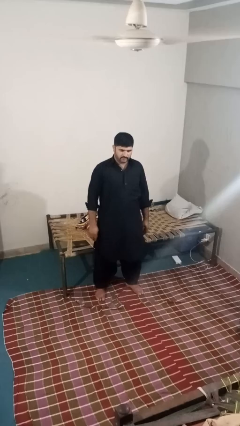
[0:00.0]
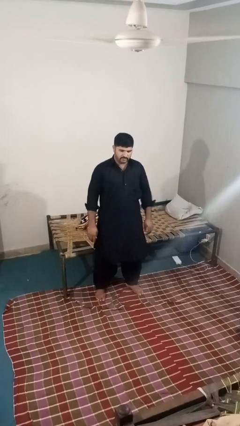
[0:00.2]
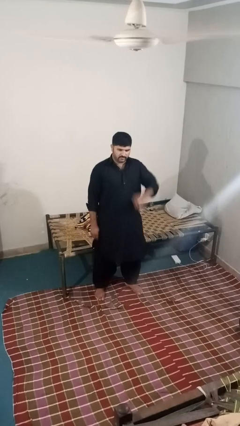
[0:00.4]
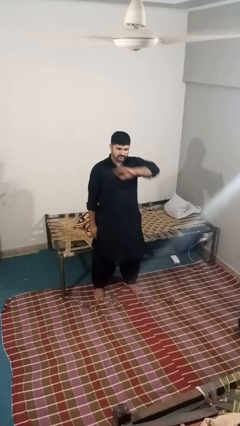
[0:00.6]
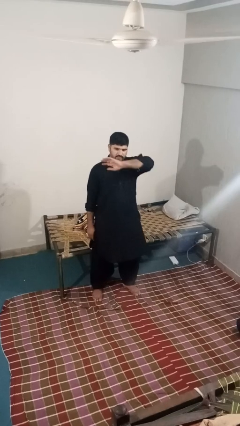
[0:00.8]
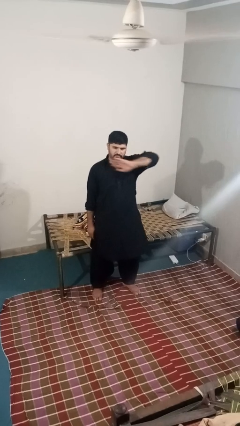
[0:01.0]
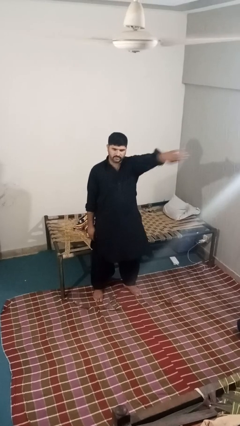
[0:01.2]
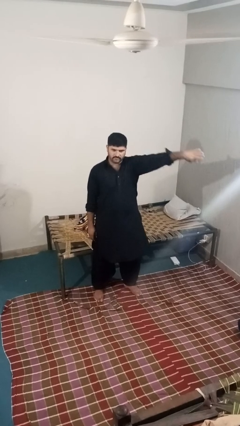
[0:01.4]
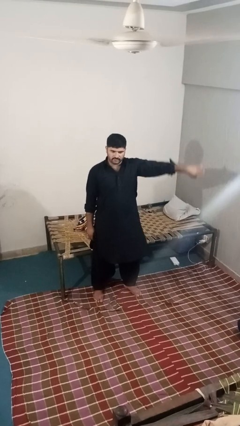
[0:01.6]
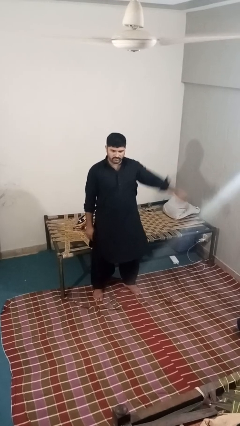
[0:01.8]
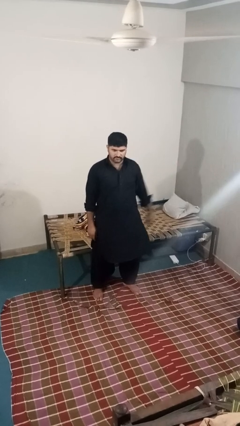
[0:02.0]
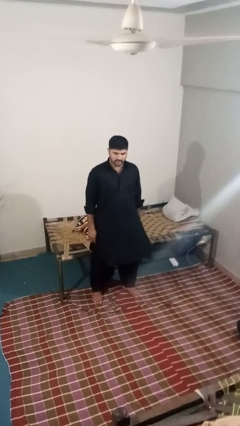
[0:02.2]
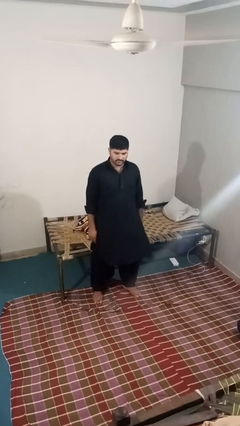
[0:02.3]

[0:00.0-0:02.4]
person gestures swipe left

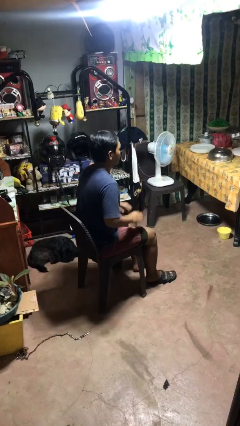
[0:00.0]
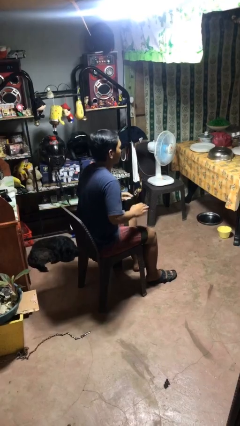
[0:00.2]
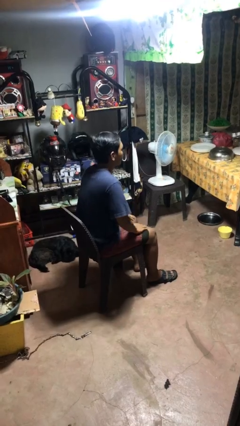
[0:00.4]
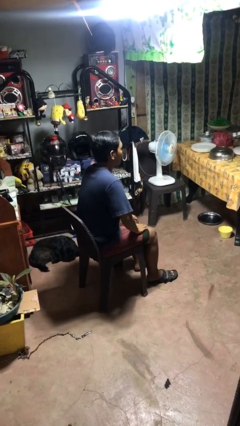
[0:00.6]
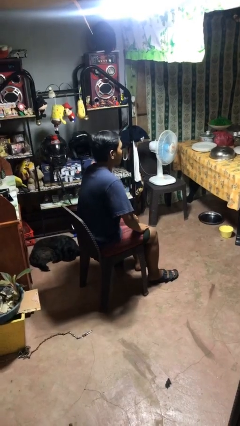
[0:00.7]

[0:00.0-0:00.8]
person slaps hands on thighs

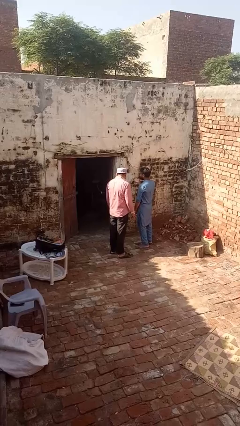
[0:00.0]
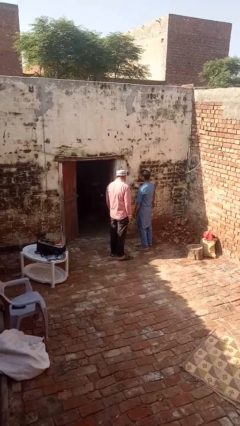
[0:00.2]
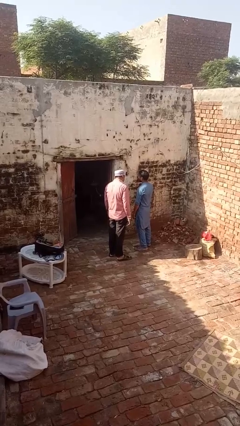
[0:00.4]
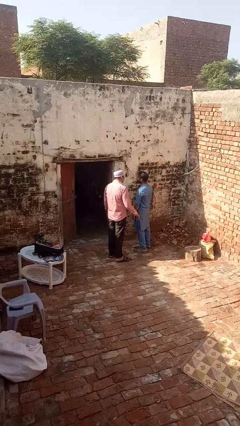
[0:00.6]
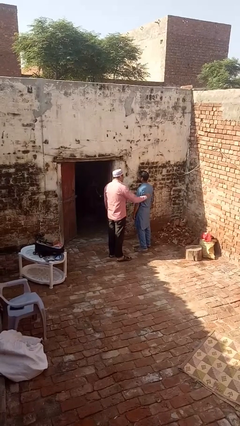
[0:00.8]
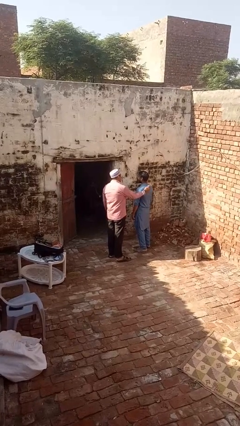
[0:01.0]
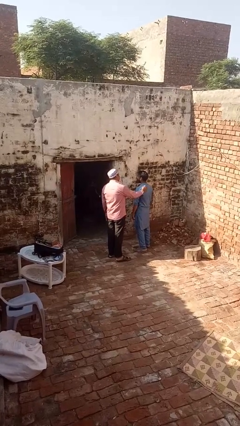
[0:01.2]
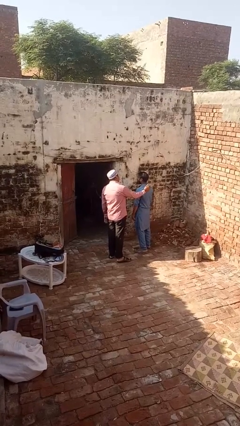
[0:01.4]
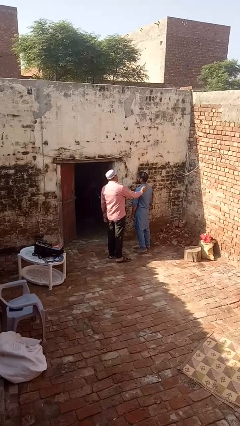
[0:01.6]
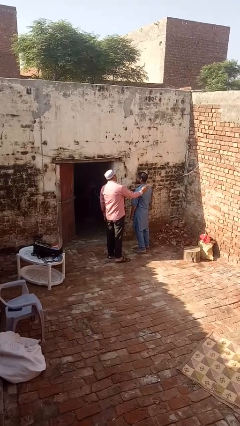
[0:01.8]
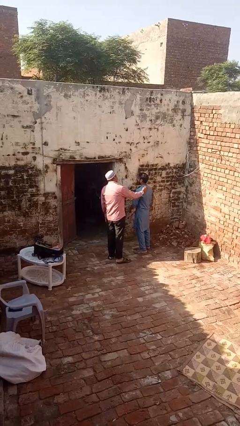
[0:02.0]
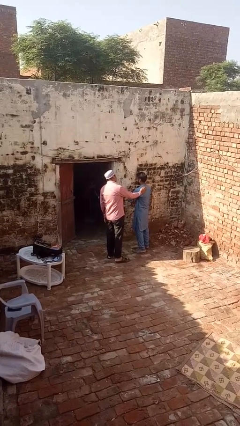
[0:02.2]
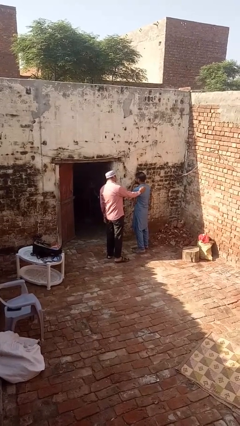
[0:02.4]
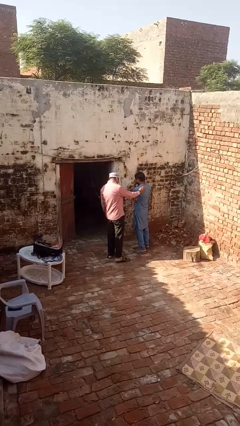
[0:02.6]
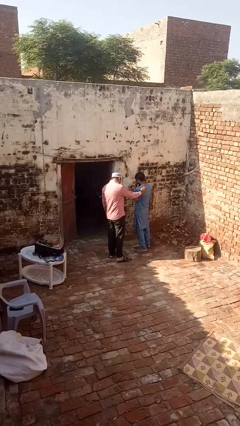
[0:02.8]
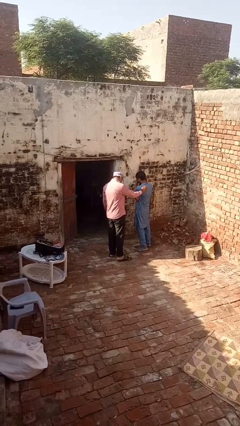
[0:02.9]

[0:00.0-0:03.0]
person laughs with person

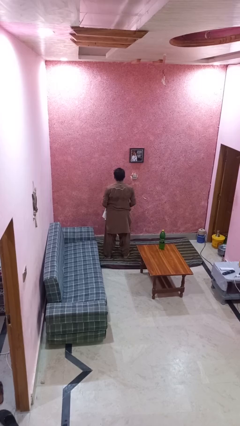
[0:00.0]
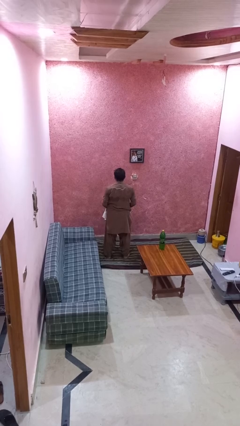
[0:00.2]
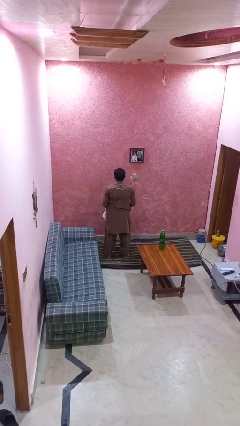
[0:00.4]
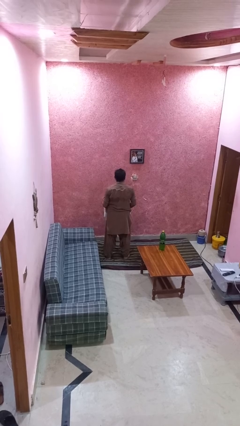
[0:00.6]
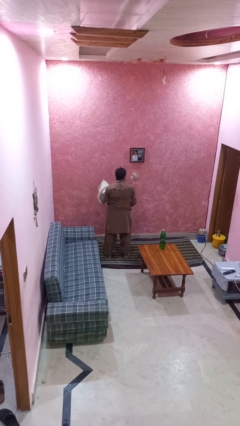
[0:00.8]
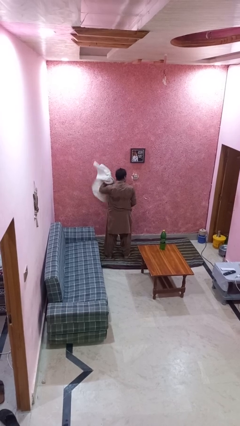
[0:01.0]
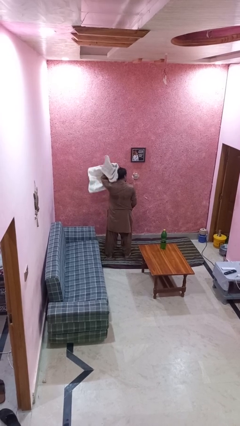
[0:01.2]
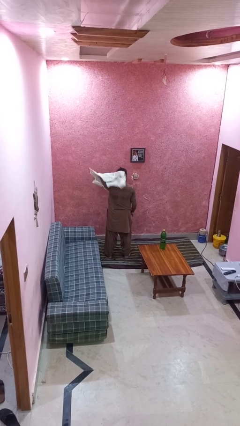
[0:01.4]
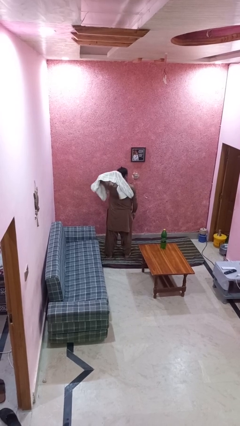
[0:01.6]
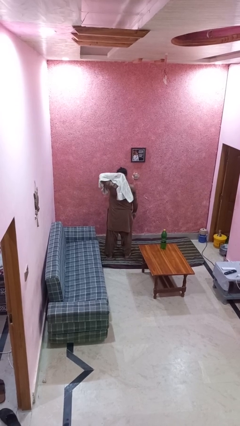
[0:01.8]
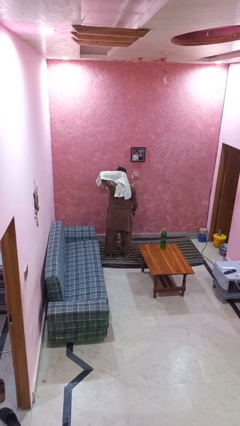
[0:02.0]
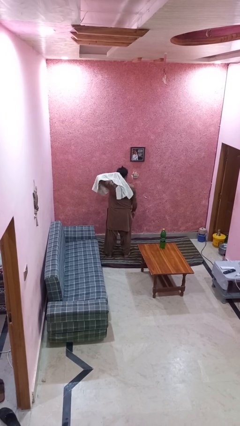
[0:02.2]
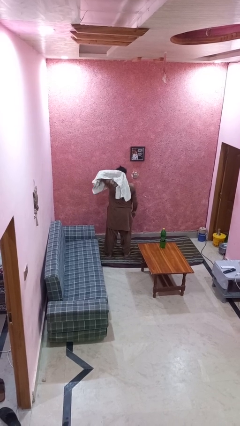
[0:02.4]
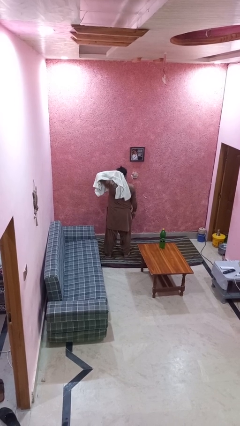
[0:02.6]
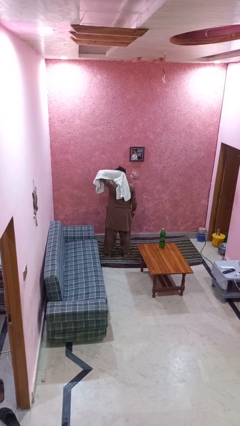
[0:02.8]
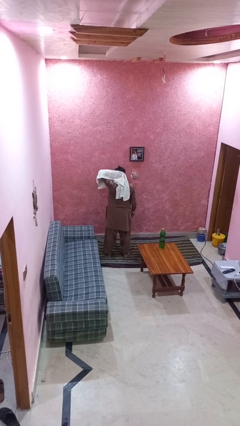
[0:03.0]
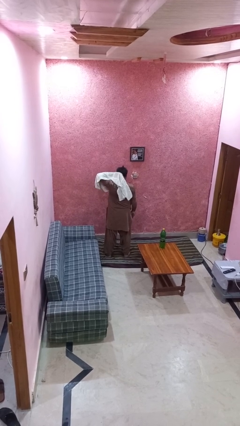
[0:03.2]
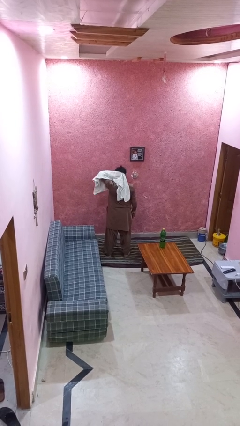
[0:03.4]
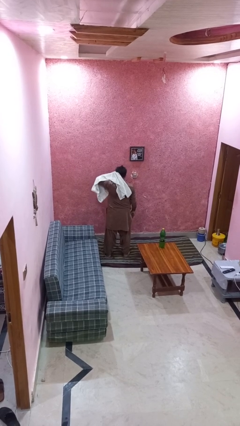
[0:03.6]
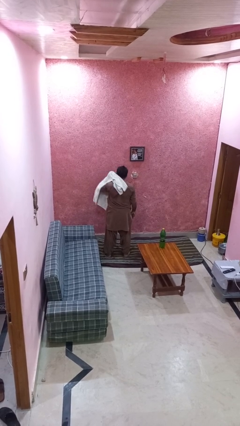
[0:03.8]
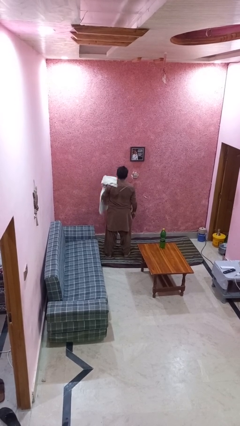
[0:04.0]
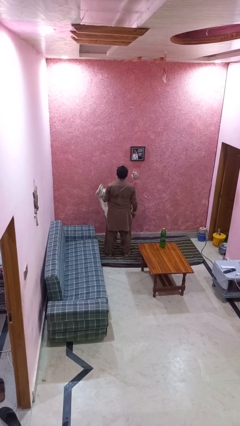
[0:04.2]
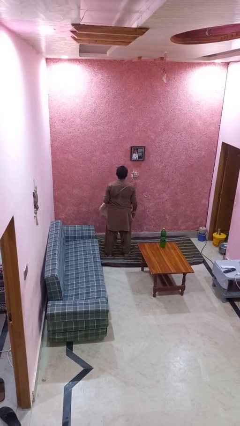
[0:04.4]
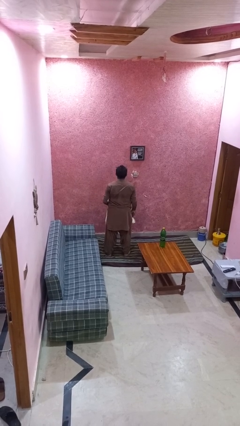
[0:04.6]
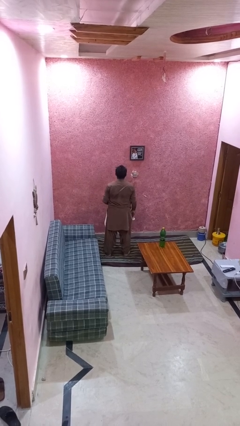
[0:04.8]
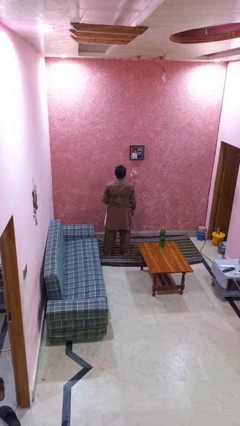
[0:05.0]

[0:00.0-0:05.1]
person dries hair with towel

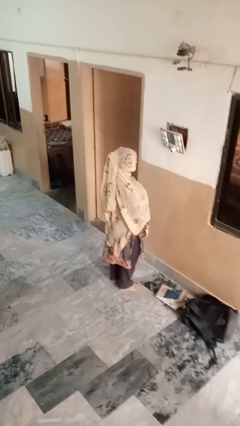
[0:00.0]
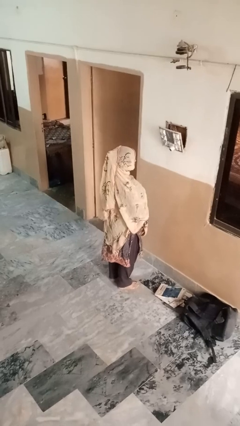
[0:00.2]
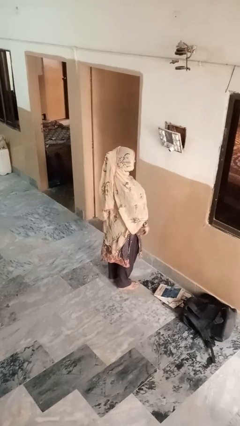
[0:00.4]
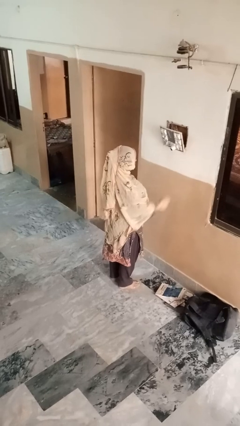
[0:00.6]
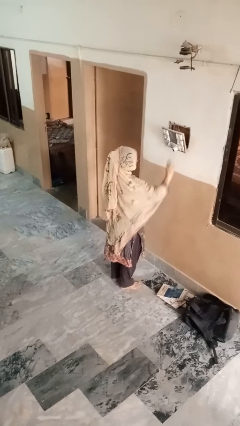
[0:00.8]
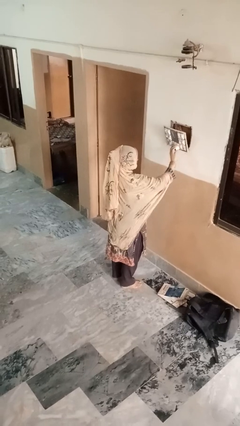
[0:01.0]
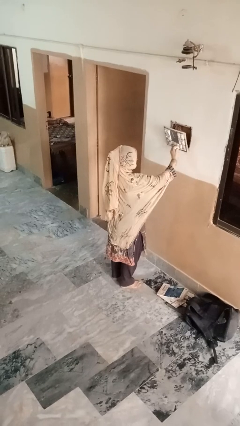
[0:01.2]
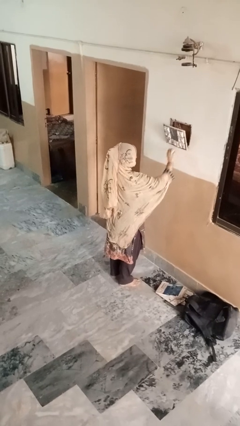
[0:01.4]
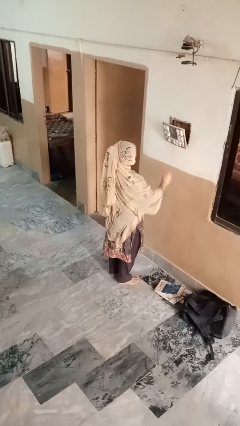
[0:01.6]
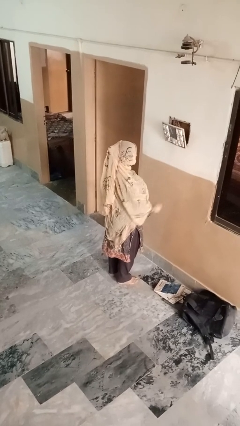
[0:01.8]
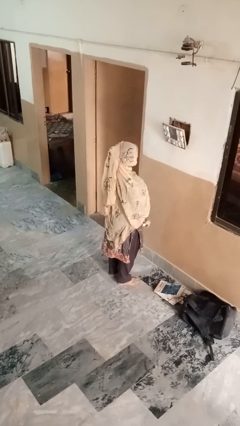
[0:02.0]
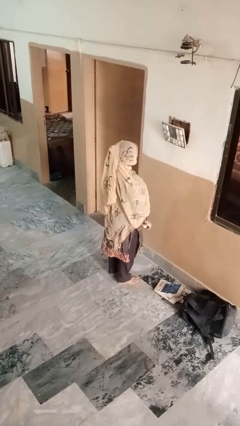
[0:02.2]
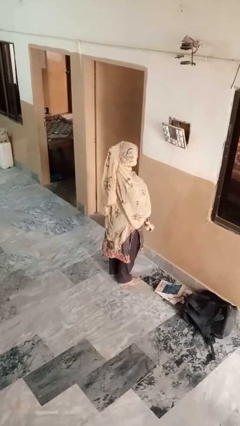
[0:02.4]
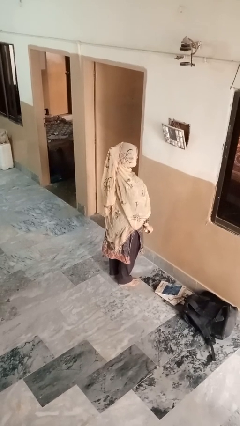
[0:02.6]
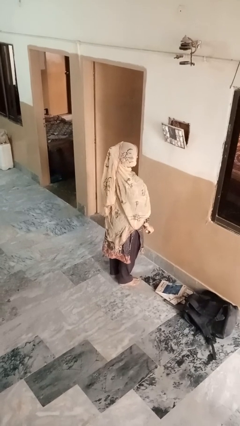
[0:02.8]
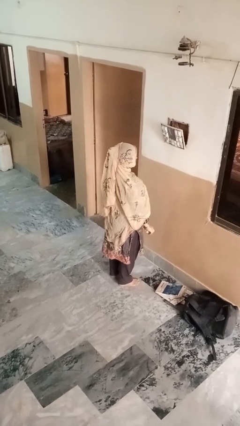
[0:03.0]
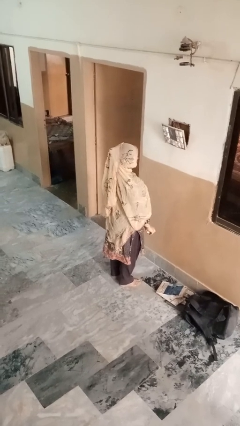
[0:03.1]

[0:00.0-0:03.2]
person unplugs from electrical socket

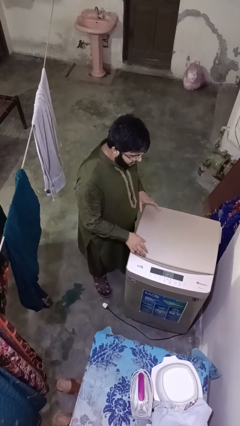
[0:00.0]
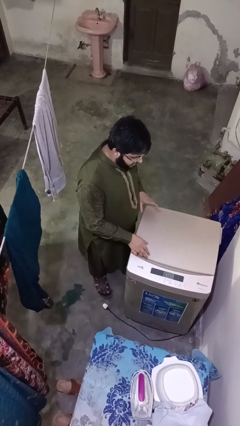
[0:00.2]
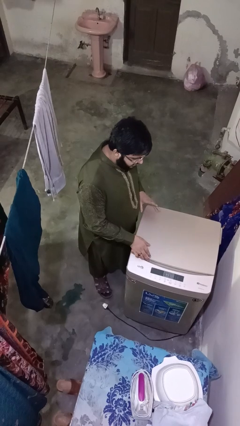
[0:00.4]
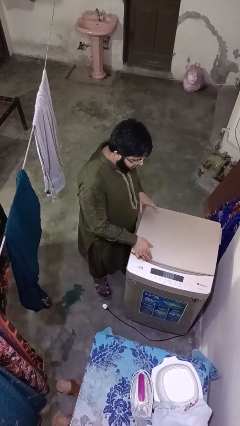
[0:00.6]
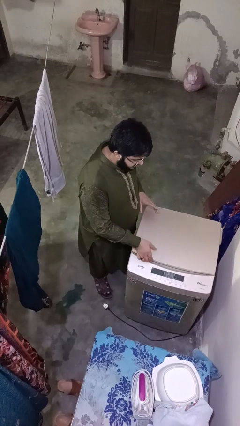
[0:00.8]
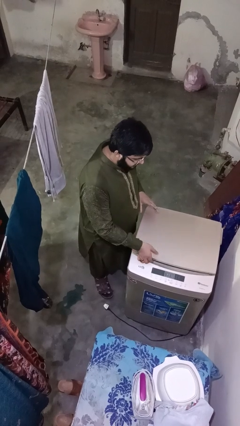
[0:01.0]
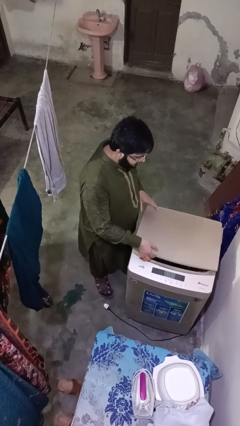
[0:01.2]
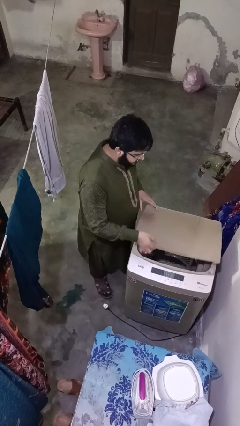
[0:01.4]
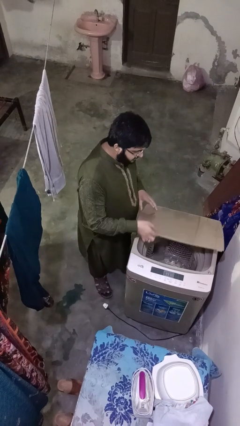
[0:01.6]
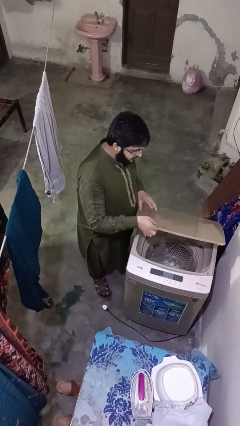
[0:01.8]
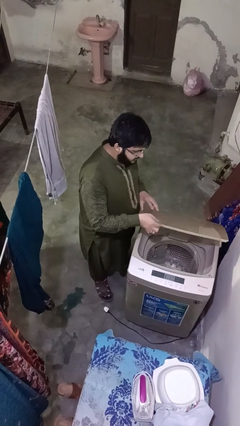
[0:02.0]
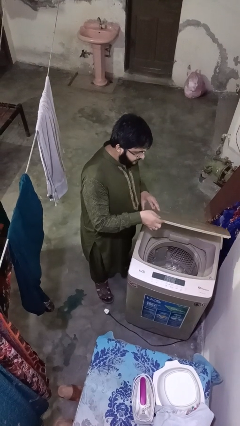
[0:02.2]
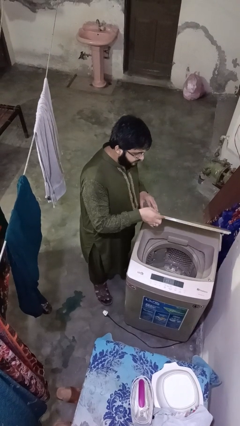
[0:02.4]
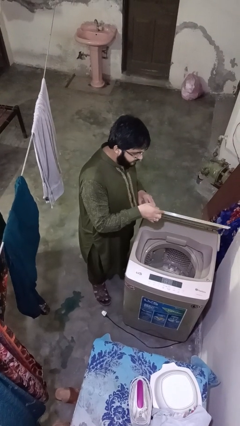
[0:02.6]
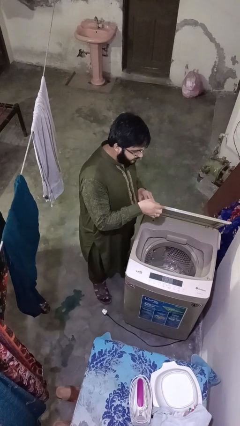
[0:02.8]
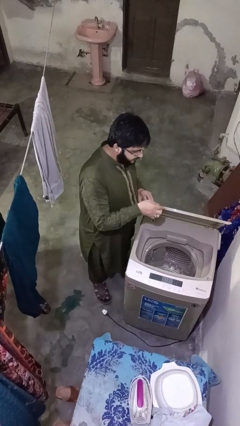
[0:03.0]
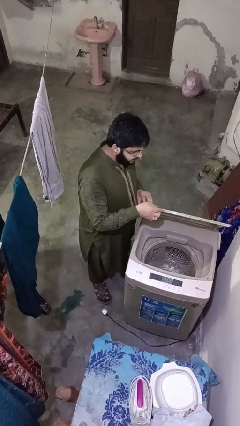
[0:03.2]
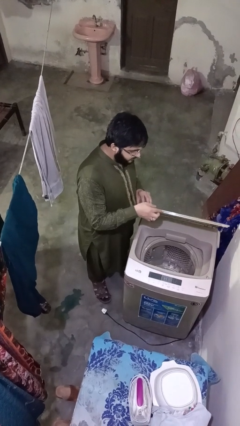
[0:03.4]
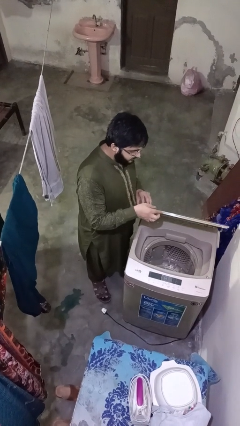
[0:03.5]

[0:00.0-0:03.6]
person opens clothes washer
